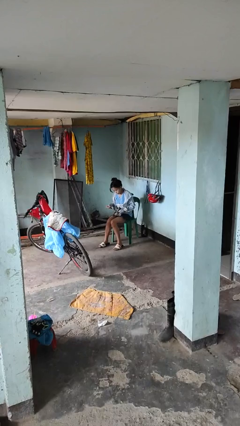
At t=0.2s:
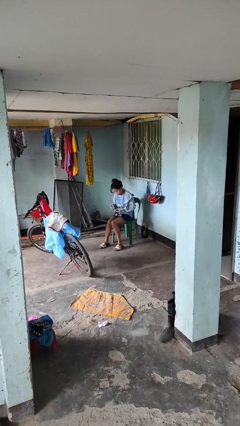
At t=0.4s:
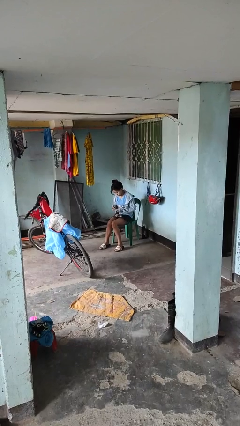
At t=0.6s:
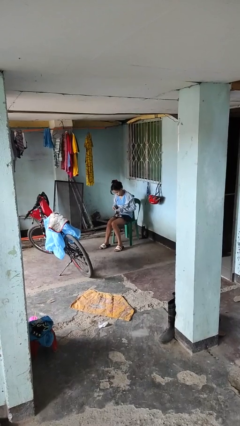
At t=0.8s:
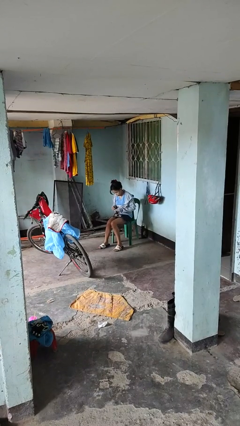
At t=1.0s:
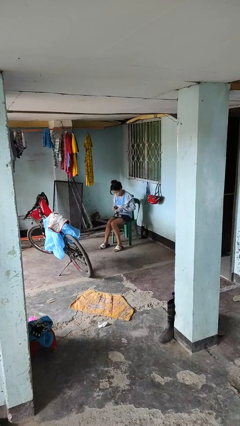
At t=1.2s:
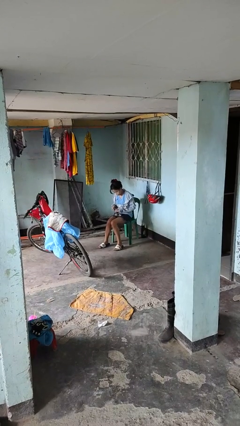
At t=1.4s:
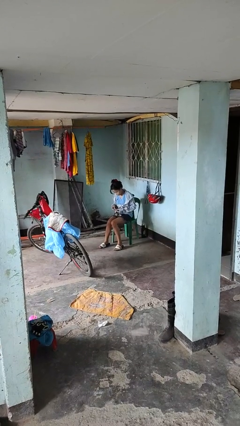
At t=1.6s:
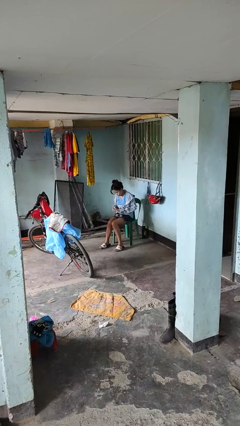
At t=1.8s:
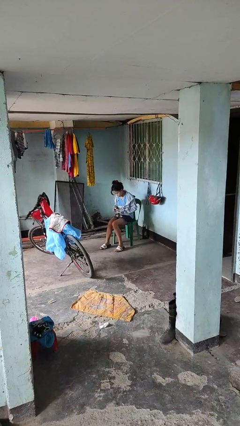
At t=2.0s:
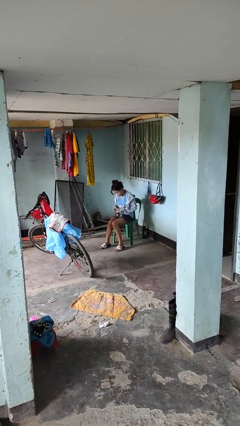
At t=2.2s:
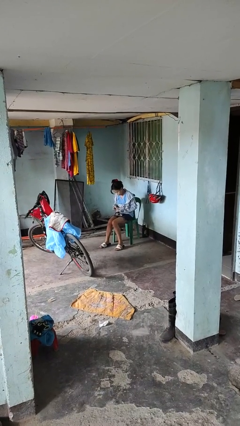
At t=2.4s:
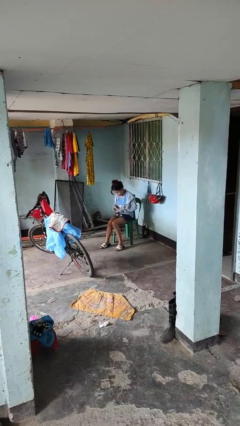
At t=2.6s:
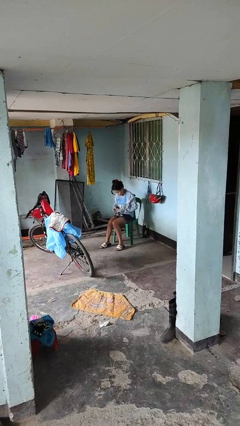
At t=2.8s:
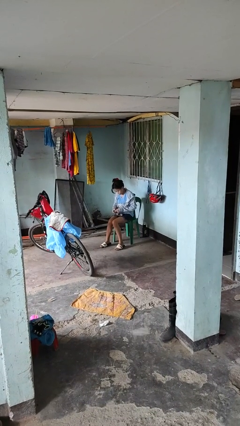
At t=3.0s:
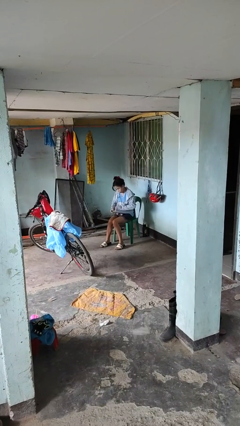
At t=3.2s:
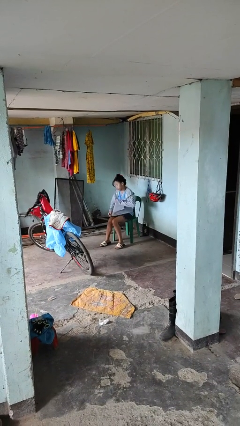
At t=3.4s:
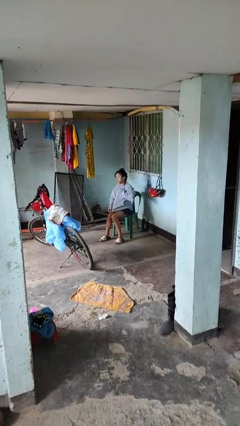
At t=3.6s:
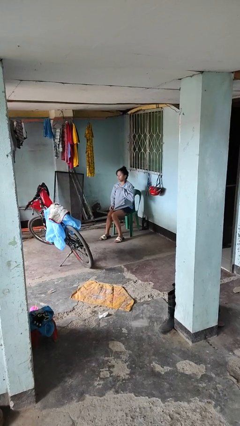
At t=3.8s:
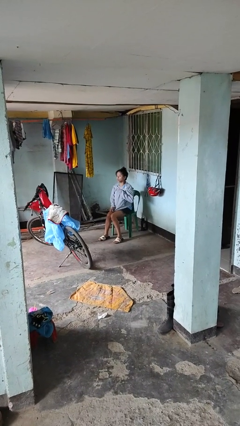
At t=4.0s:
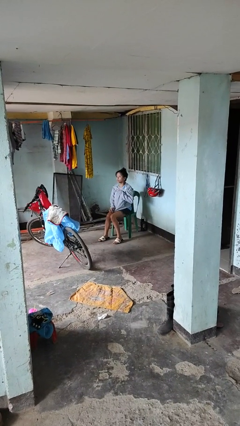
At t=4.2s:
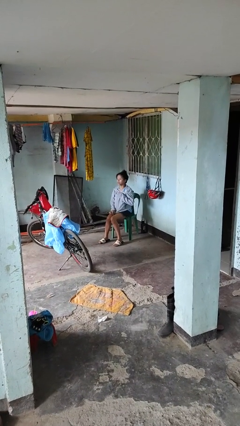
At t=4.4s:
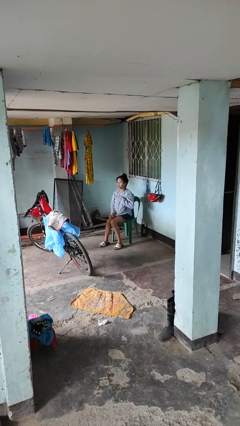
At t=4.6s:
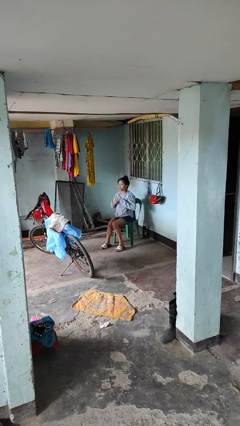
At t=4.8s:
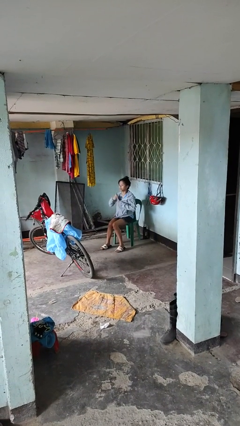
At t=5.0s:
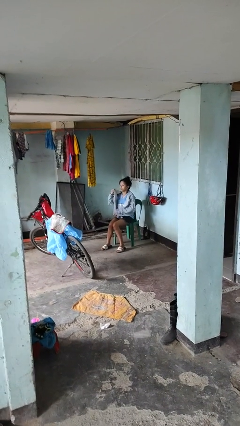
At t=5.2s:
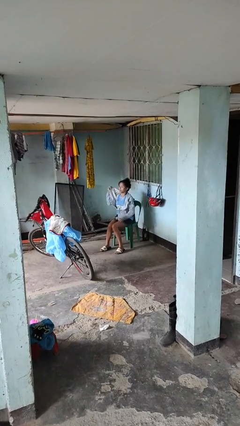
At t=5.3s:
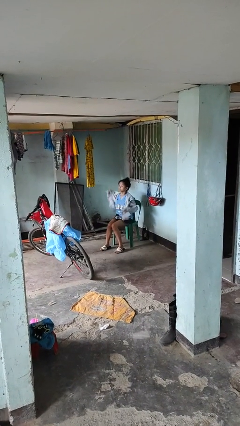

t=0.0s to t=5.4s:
person zips up jacket

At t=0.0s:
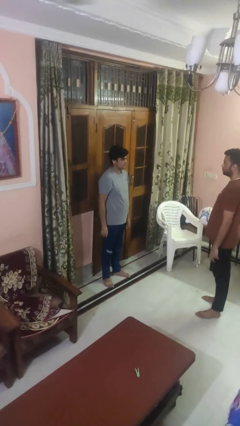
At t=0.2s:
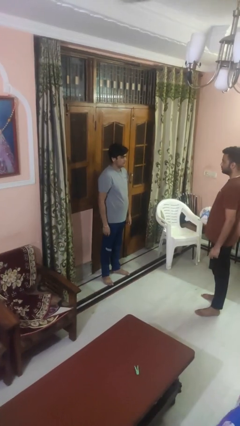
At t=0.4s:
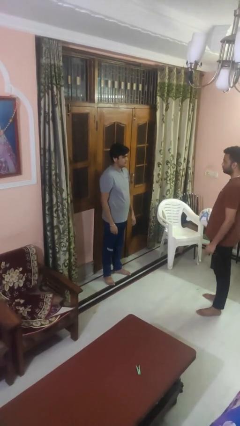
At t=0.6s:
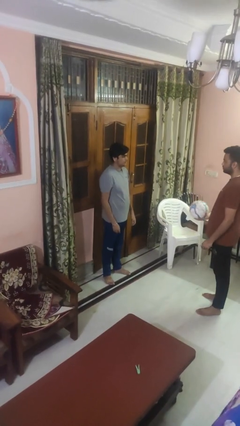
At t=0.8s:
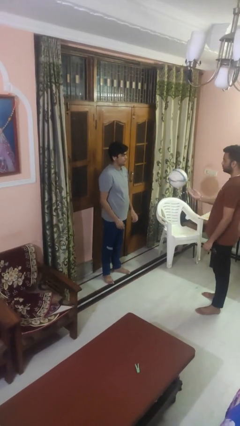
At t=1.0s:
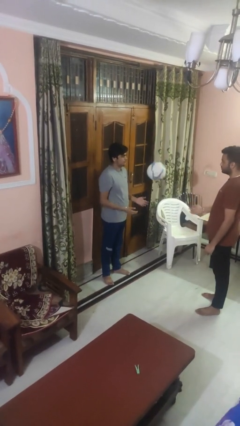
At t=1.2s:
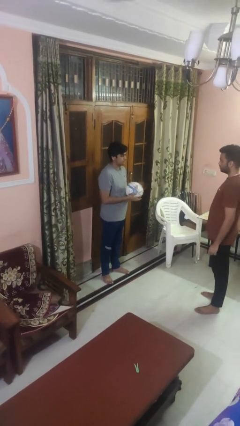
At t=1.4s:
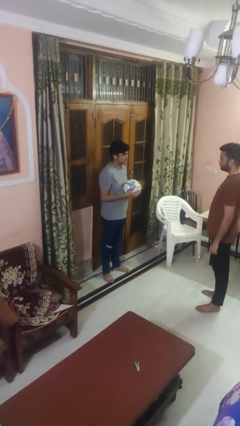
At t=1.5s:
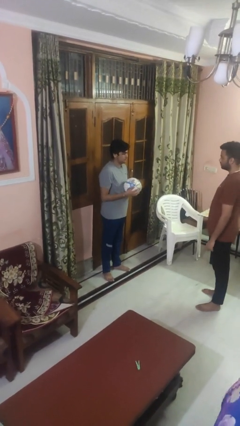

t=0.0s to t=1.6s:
person catches object from person

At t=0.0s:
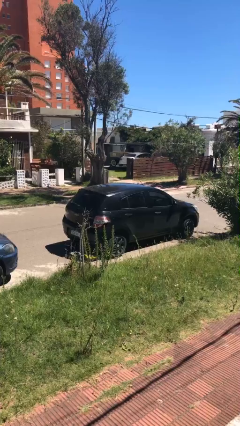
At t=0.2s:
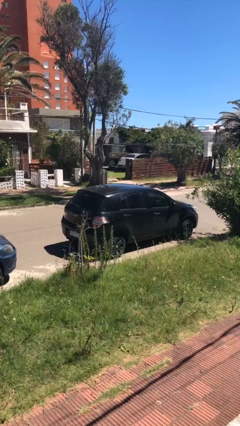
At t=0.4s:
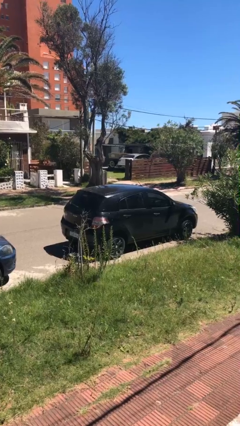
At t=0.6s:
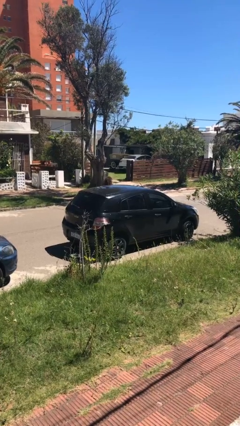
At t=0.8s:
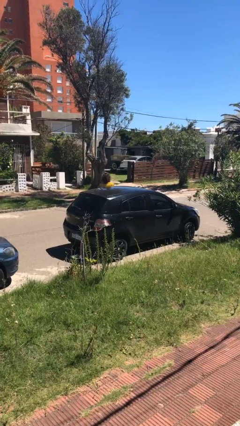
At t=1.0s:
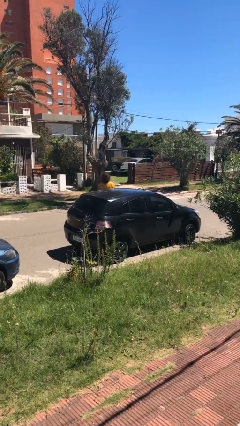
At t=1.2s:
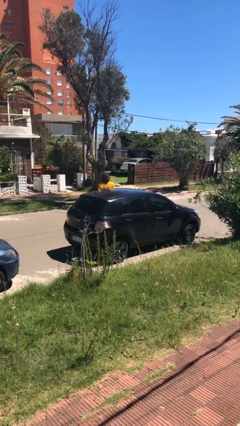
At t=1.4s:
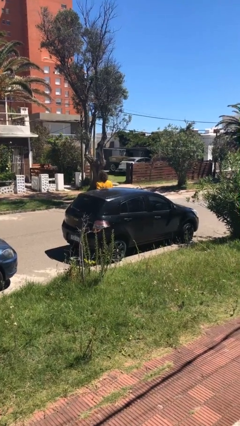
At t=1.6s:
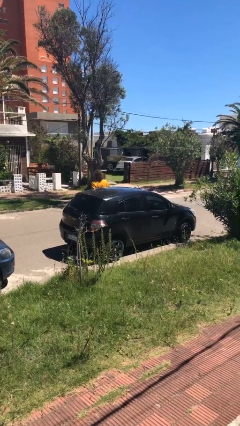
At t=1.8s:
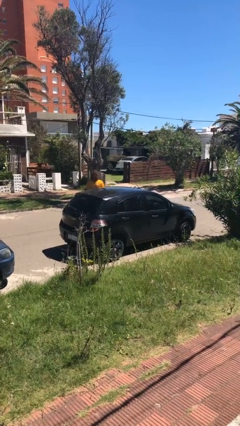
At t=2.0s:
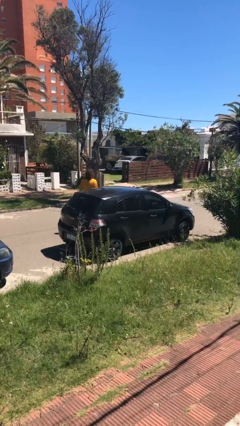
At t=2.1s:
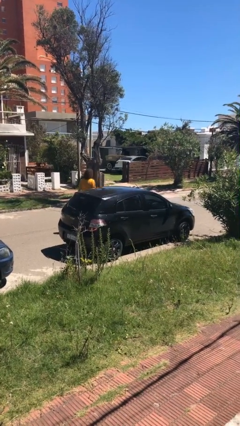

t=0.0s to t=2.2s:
car drops off person

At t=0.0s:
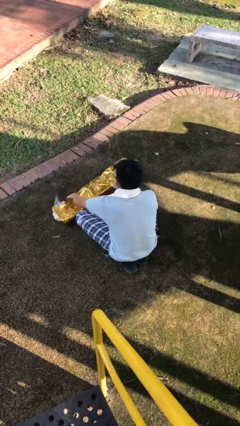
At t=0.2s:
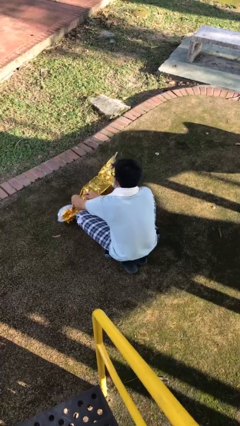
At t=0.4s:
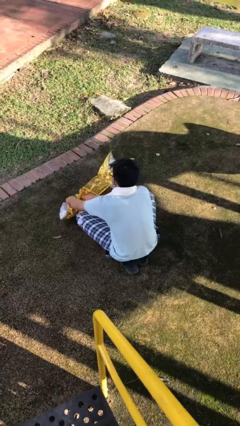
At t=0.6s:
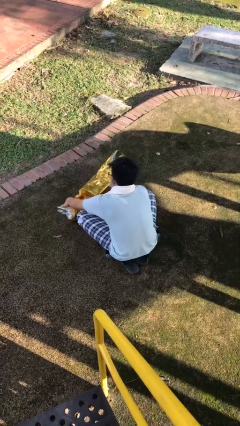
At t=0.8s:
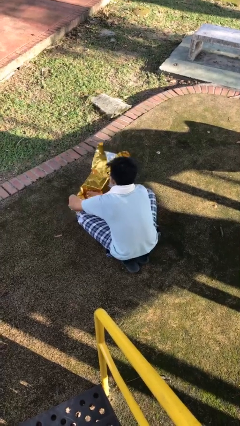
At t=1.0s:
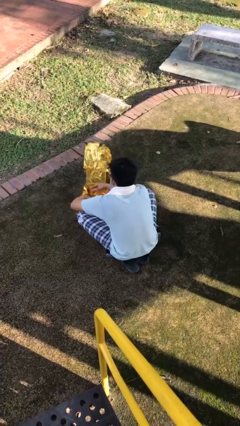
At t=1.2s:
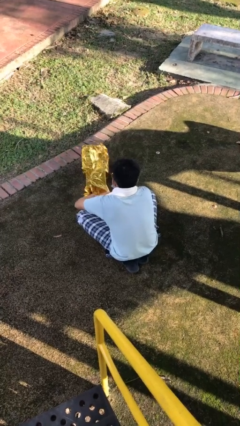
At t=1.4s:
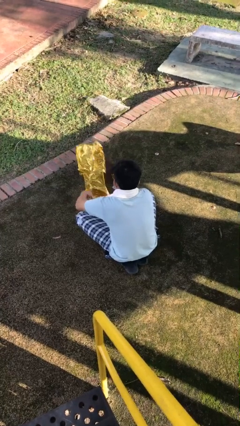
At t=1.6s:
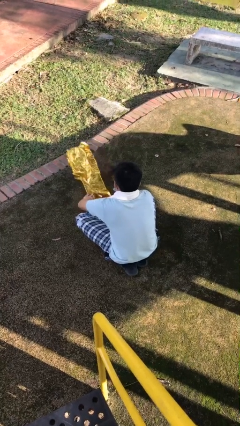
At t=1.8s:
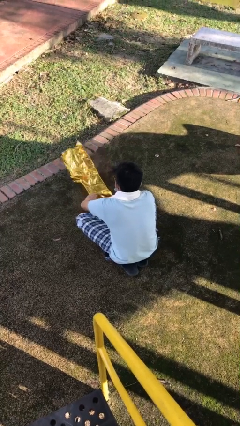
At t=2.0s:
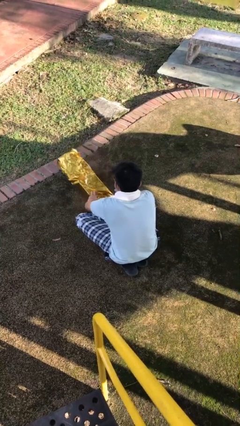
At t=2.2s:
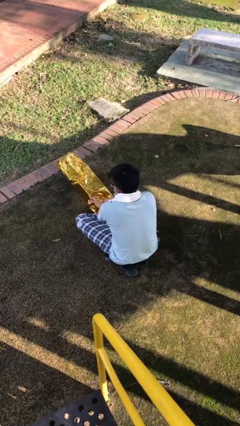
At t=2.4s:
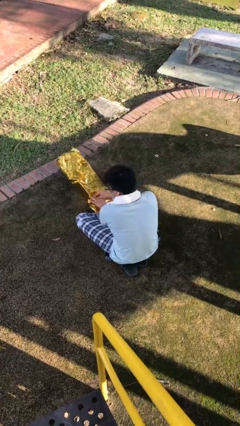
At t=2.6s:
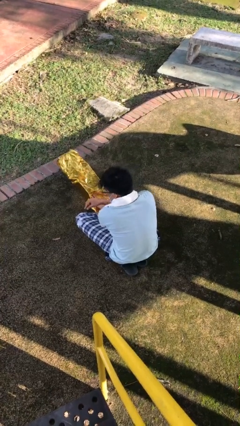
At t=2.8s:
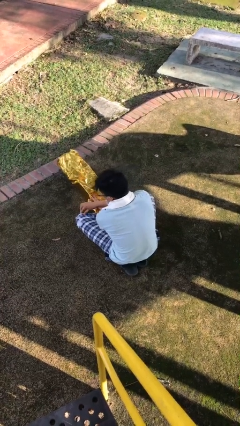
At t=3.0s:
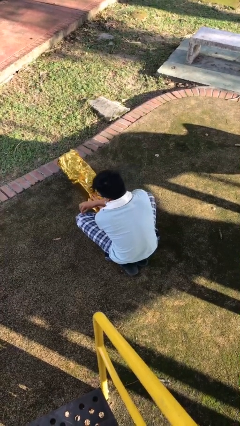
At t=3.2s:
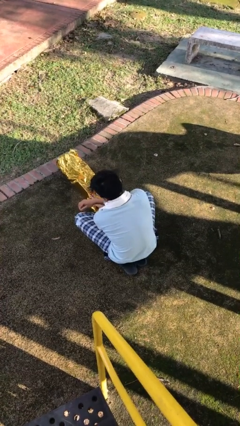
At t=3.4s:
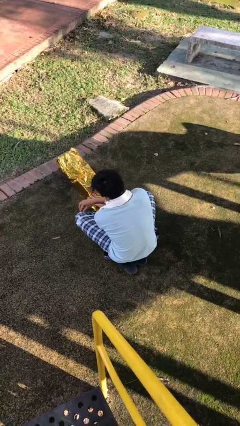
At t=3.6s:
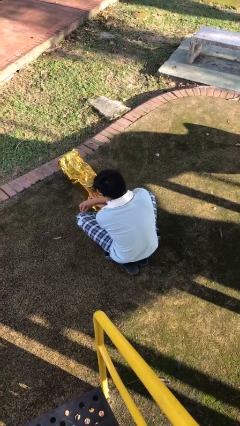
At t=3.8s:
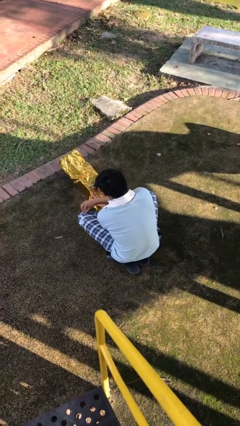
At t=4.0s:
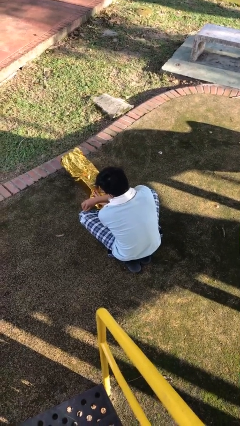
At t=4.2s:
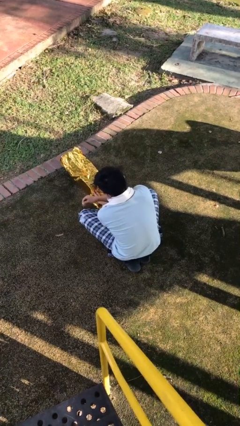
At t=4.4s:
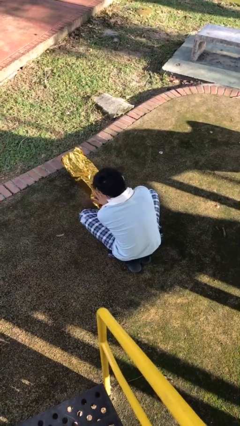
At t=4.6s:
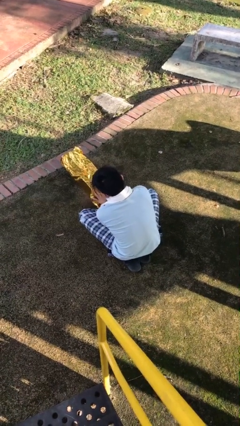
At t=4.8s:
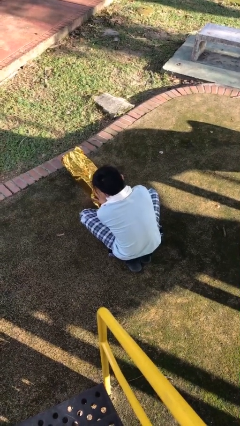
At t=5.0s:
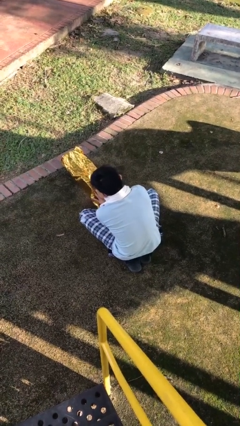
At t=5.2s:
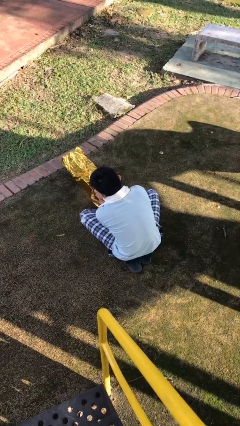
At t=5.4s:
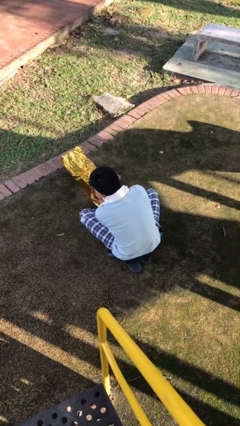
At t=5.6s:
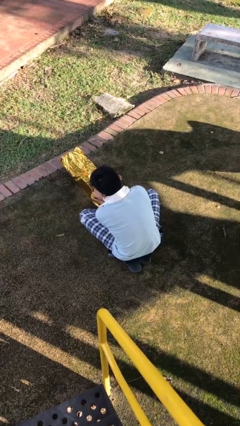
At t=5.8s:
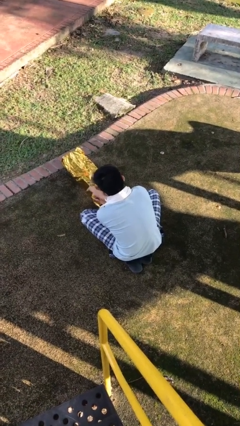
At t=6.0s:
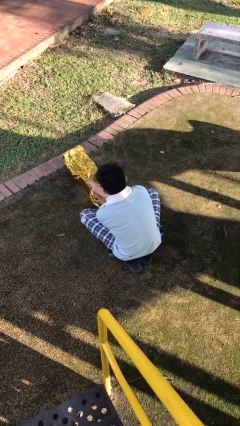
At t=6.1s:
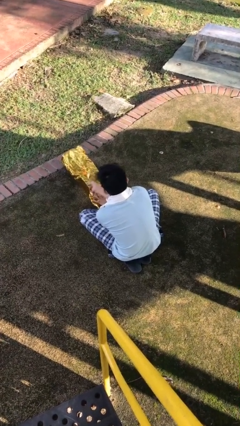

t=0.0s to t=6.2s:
person wraps box

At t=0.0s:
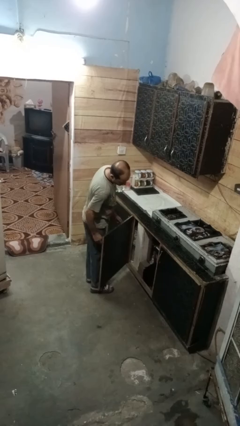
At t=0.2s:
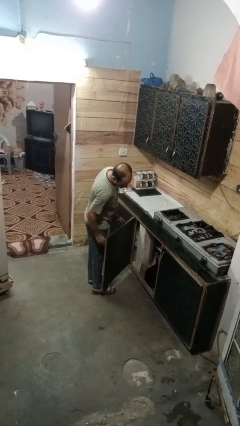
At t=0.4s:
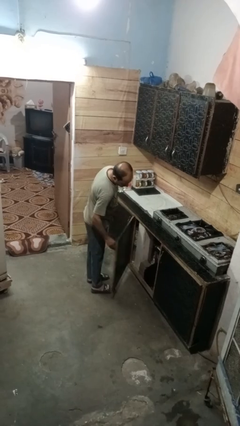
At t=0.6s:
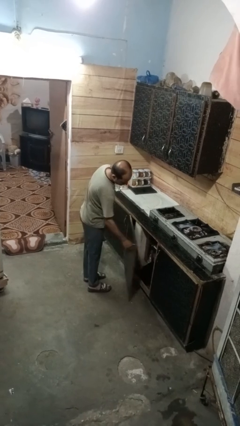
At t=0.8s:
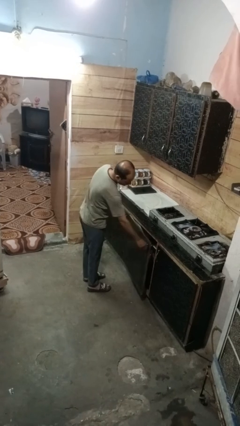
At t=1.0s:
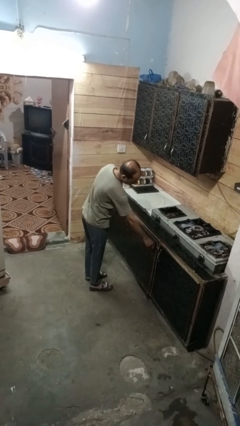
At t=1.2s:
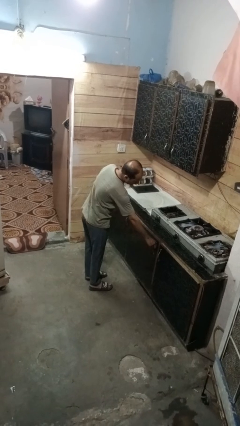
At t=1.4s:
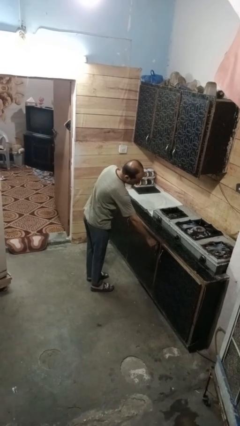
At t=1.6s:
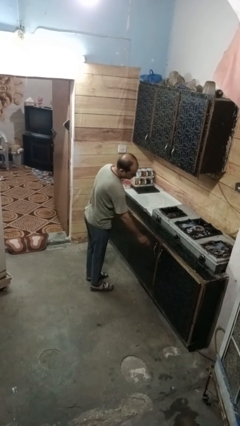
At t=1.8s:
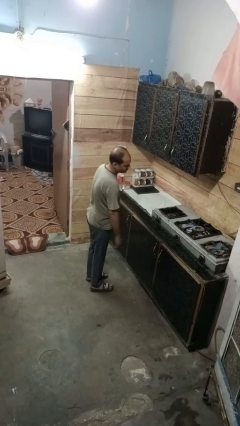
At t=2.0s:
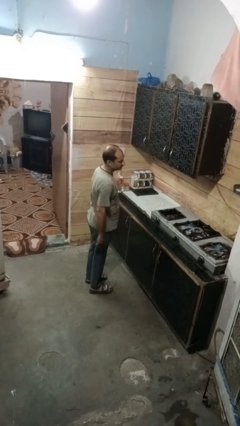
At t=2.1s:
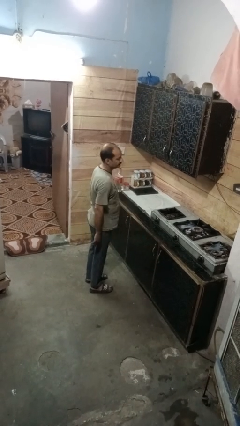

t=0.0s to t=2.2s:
person closes cabinet
